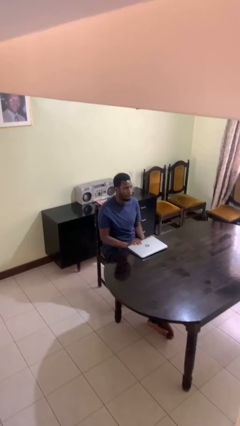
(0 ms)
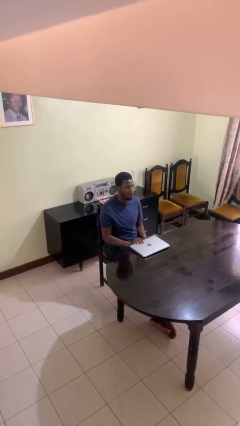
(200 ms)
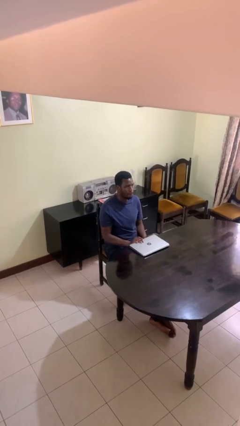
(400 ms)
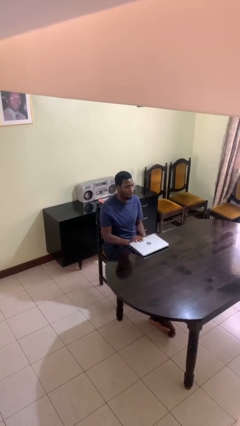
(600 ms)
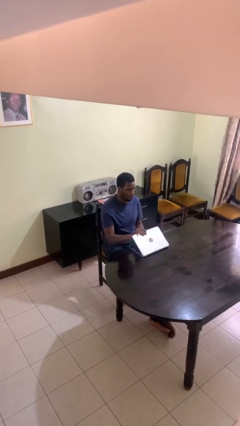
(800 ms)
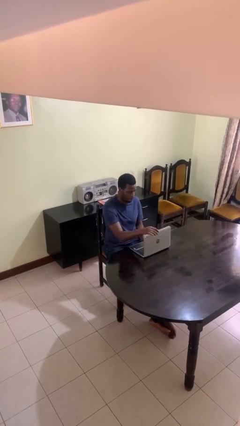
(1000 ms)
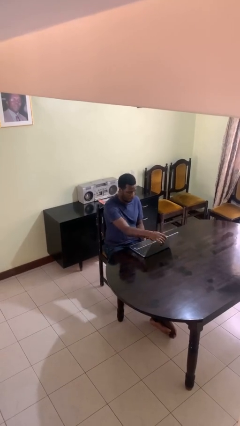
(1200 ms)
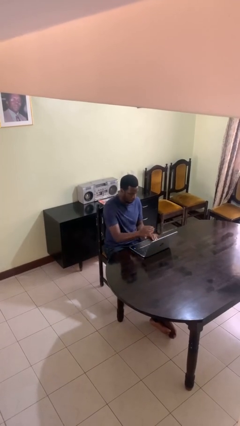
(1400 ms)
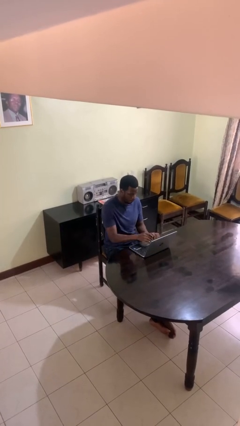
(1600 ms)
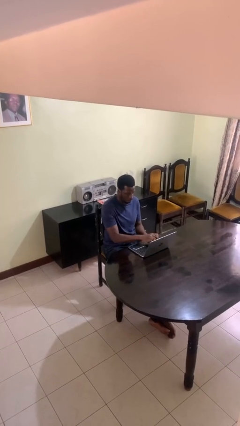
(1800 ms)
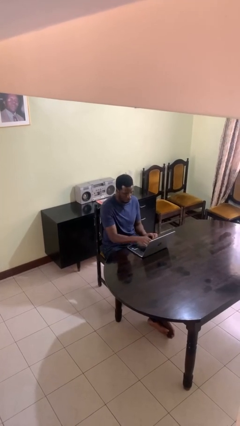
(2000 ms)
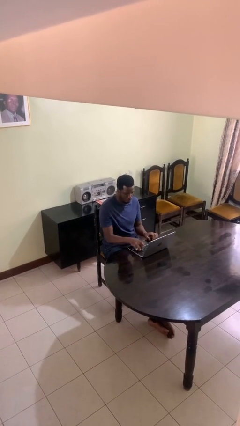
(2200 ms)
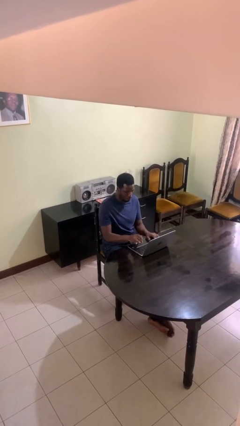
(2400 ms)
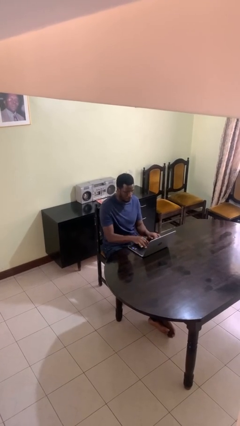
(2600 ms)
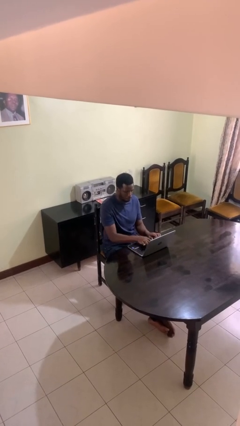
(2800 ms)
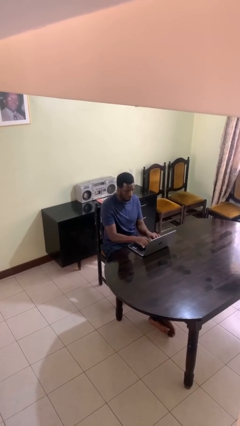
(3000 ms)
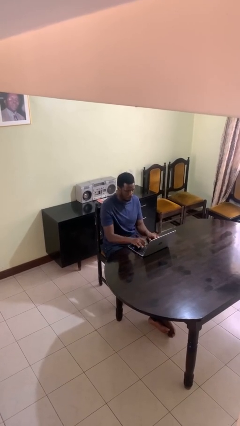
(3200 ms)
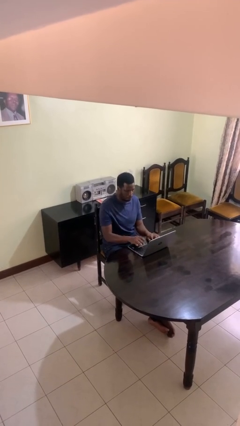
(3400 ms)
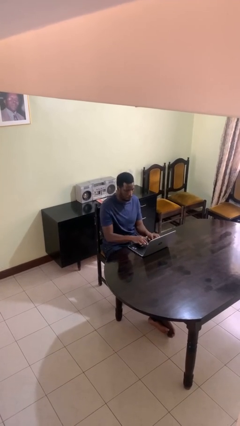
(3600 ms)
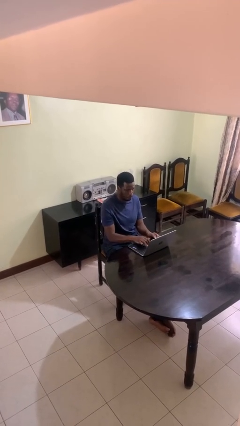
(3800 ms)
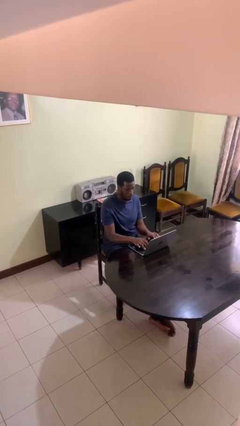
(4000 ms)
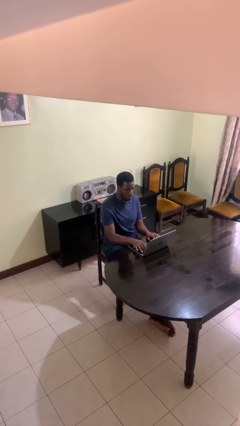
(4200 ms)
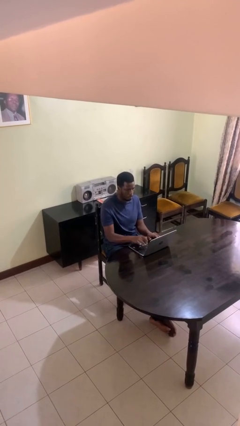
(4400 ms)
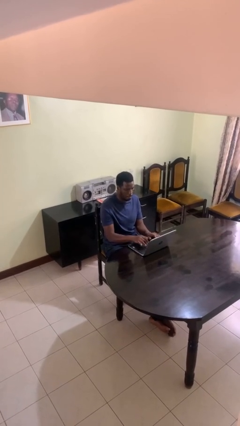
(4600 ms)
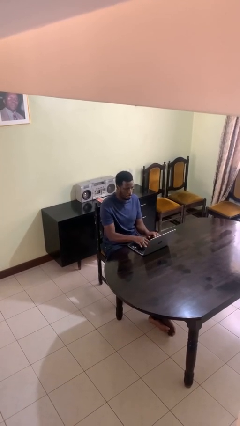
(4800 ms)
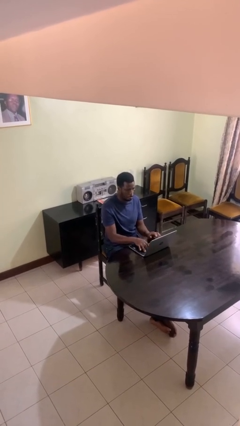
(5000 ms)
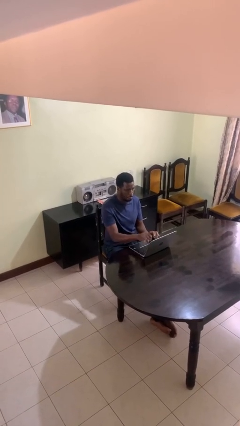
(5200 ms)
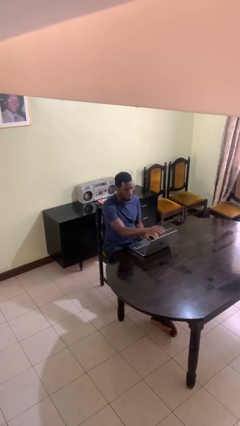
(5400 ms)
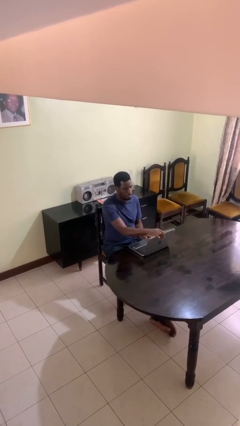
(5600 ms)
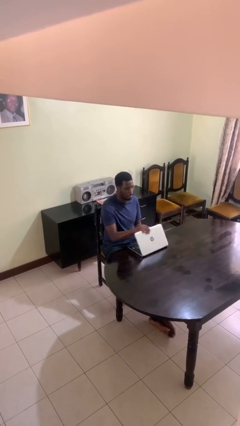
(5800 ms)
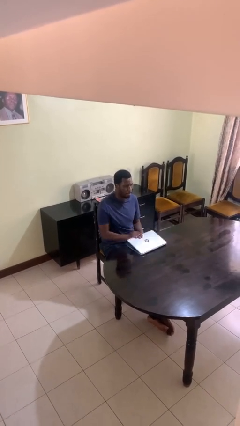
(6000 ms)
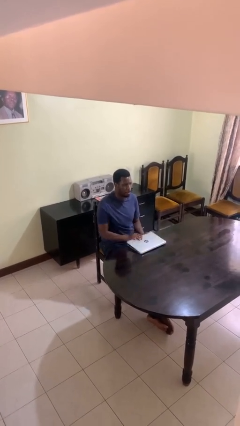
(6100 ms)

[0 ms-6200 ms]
person interacts with laptop

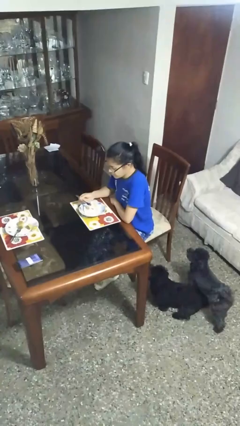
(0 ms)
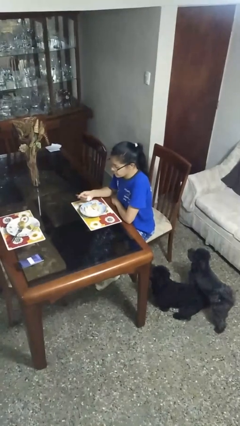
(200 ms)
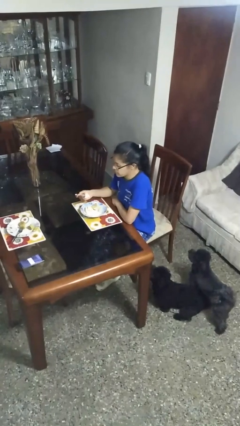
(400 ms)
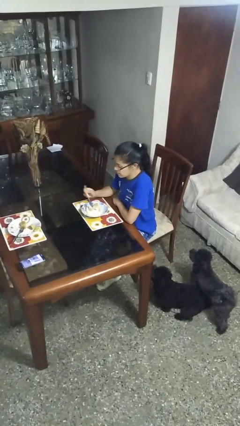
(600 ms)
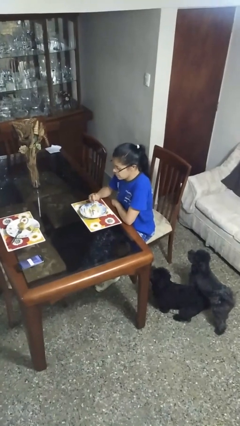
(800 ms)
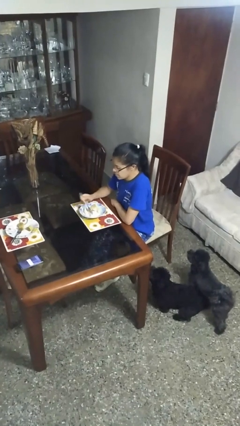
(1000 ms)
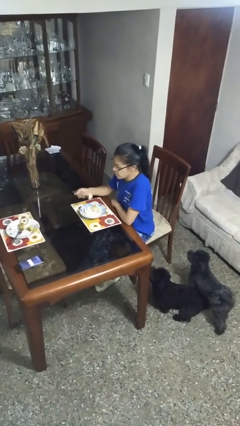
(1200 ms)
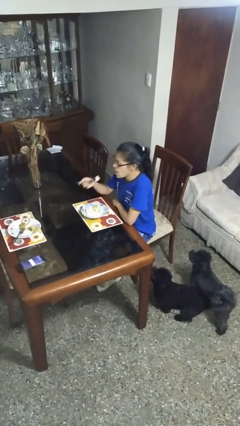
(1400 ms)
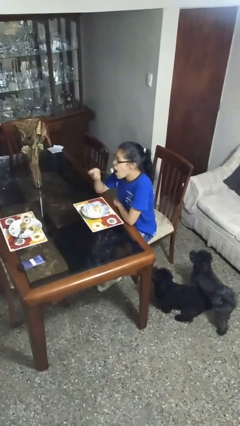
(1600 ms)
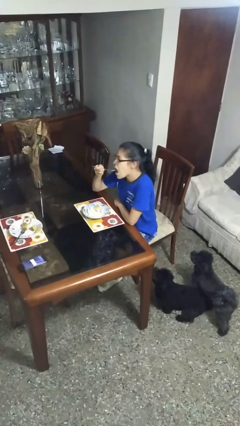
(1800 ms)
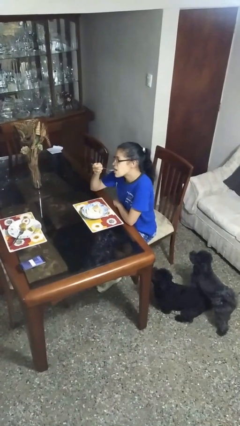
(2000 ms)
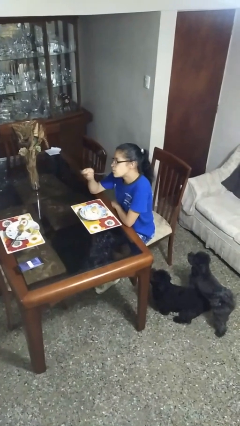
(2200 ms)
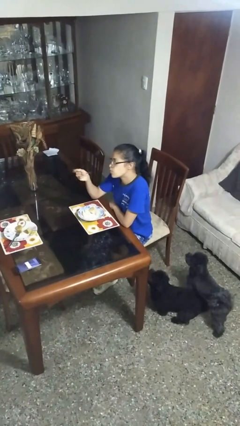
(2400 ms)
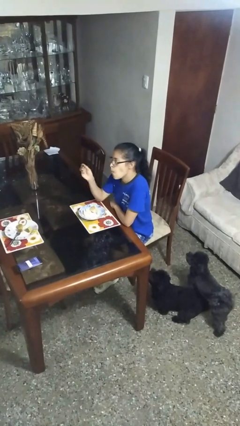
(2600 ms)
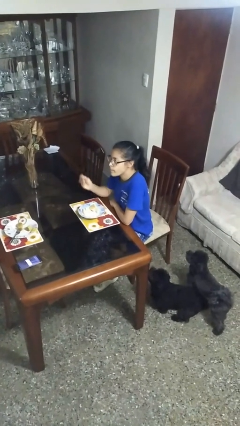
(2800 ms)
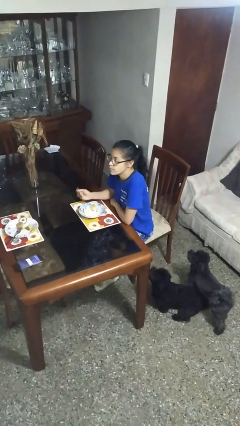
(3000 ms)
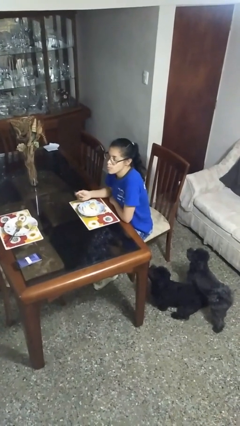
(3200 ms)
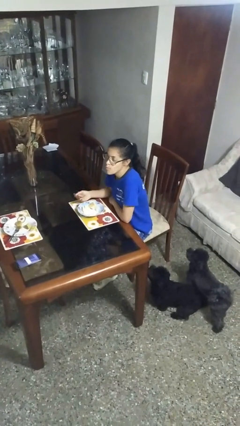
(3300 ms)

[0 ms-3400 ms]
person eats with utensil

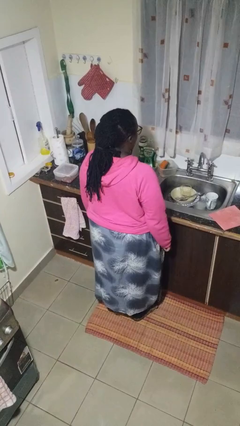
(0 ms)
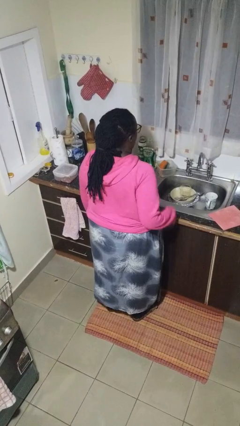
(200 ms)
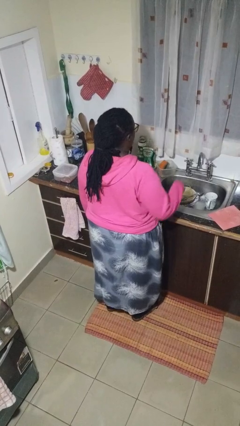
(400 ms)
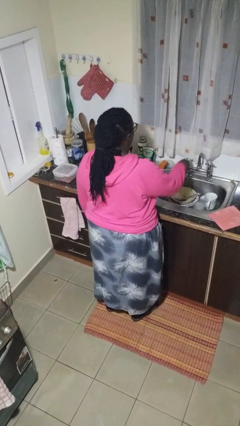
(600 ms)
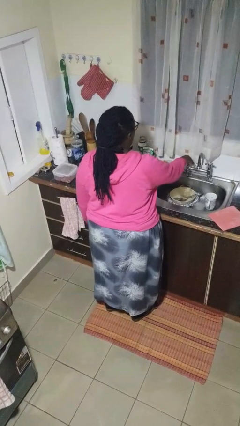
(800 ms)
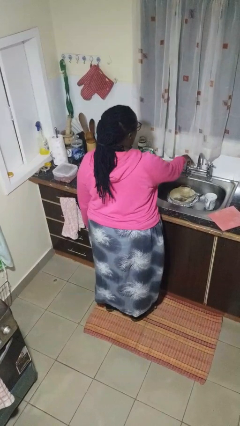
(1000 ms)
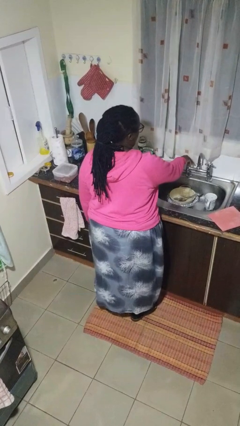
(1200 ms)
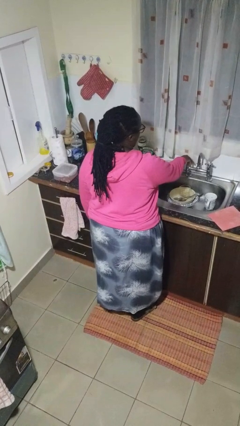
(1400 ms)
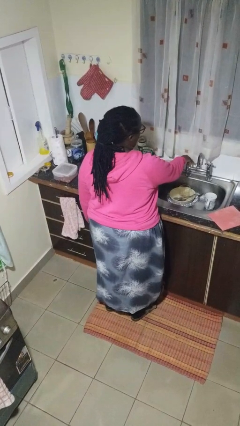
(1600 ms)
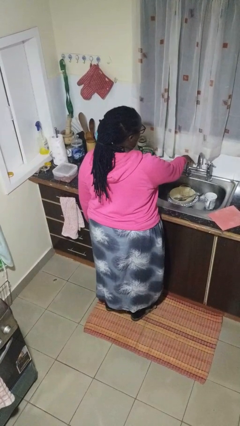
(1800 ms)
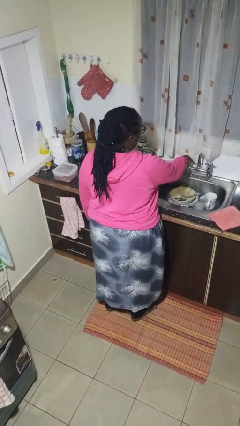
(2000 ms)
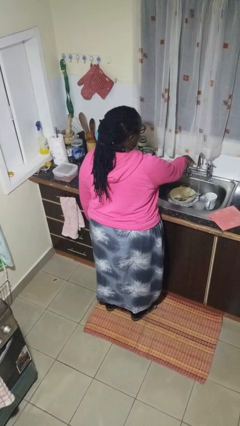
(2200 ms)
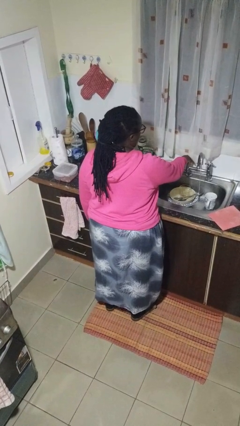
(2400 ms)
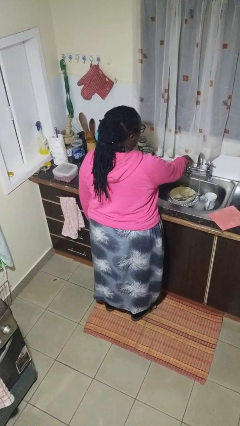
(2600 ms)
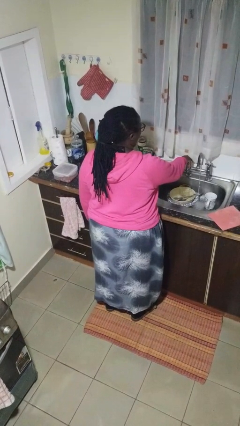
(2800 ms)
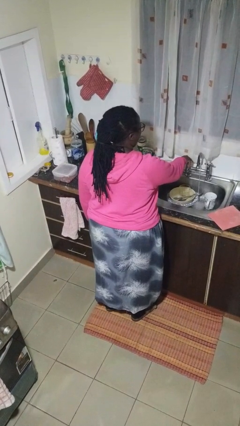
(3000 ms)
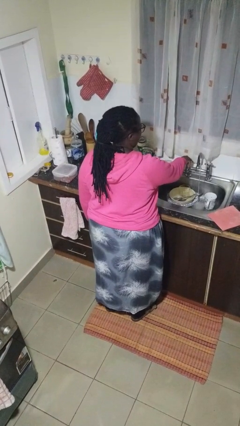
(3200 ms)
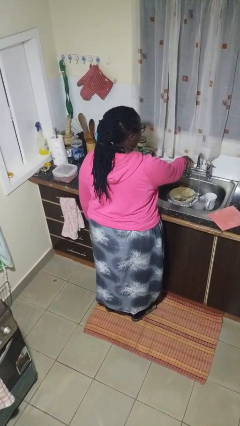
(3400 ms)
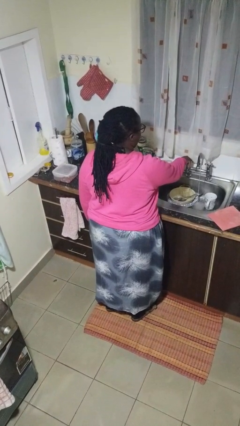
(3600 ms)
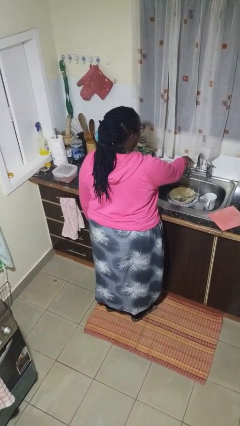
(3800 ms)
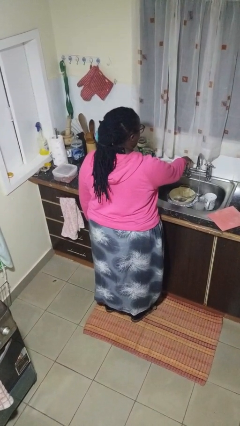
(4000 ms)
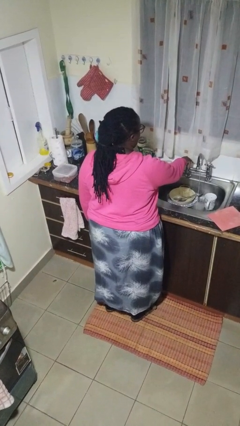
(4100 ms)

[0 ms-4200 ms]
person turns on faucet

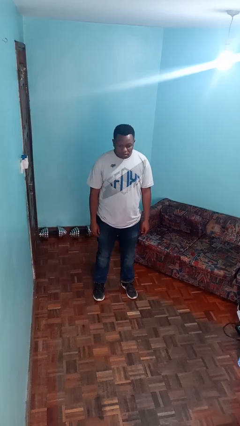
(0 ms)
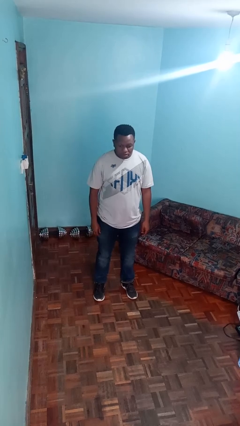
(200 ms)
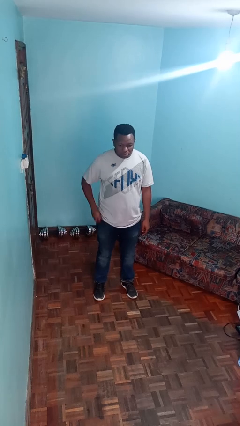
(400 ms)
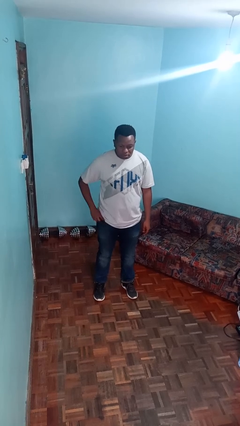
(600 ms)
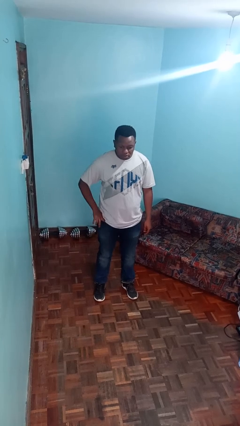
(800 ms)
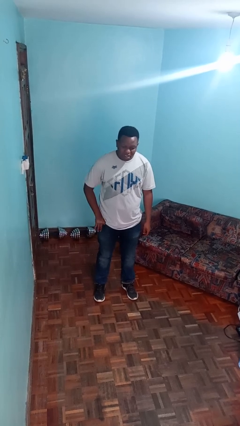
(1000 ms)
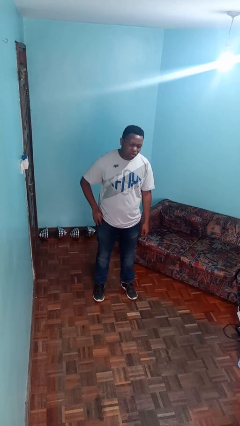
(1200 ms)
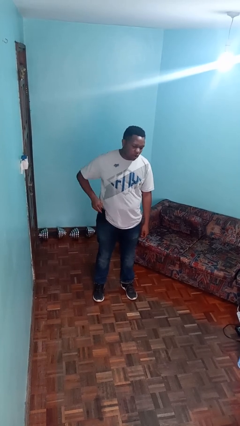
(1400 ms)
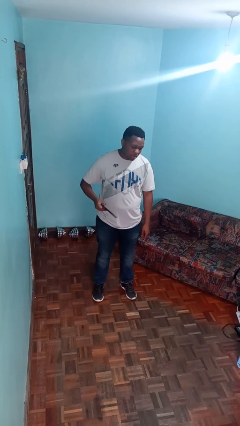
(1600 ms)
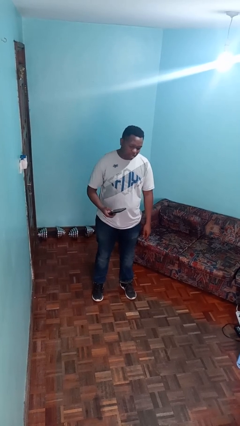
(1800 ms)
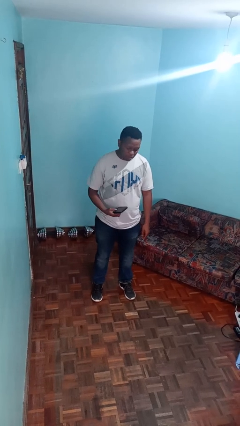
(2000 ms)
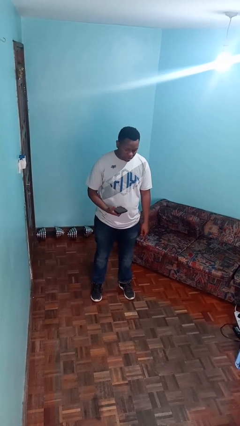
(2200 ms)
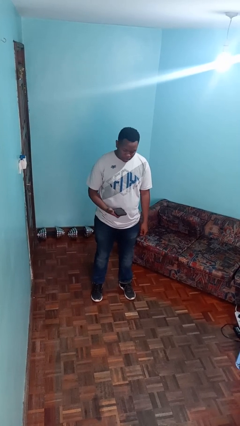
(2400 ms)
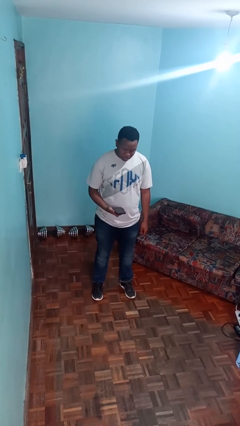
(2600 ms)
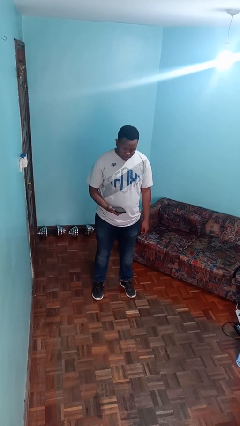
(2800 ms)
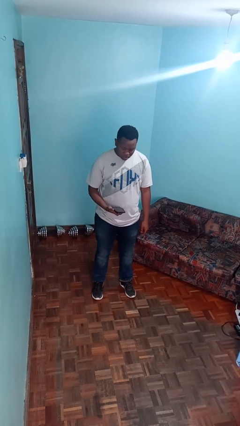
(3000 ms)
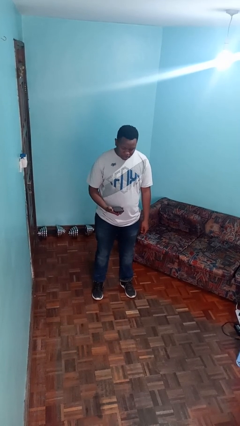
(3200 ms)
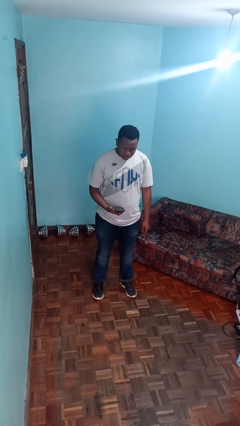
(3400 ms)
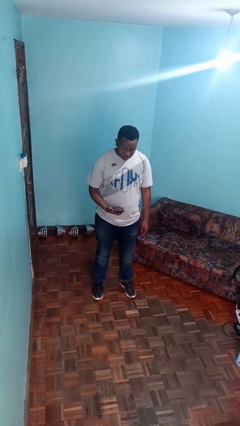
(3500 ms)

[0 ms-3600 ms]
person takes phone from pocket

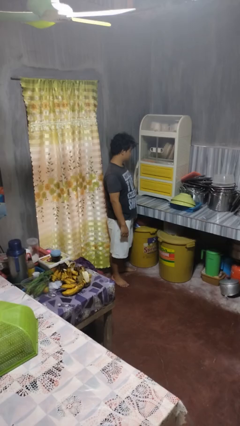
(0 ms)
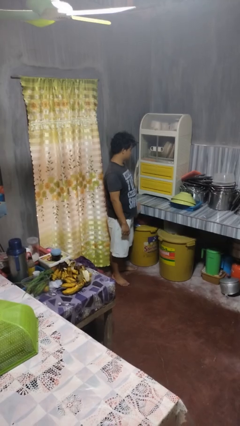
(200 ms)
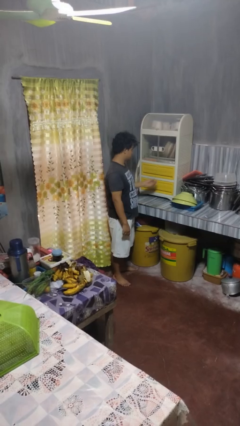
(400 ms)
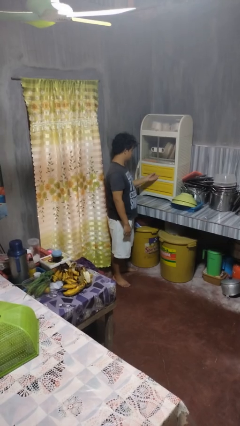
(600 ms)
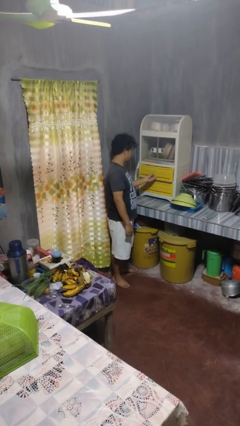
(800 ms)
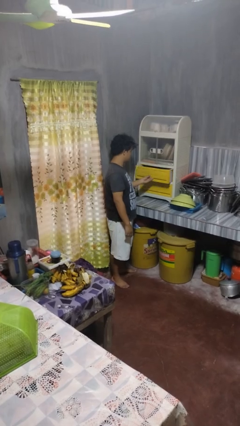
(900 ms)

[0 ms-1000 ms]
person opens kitchen drawer
